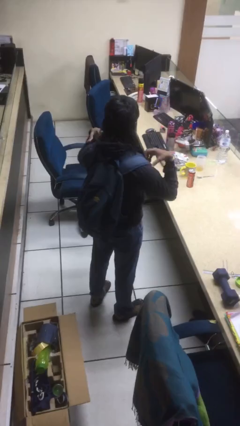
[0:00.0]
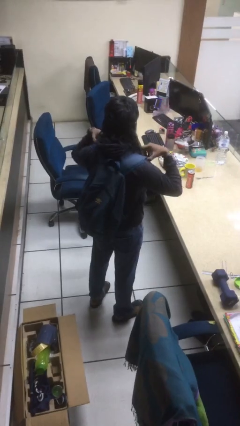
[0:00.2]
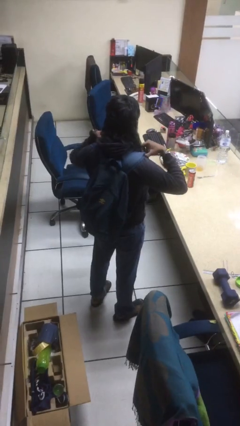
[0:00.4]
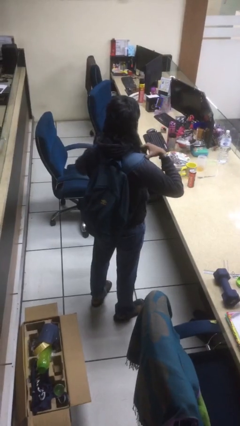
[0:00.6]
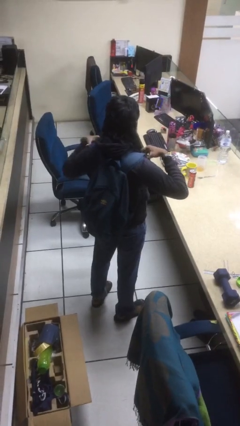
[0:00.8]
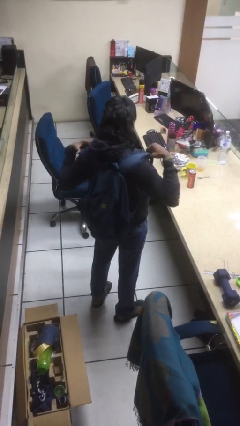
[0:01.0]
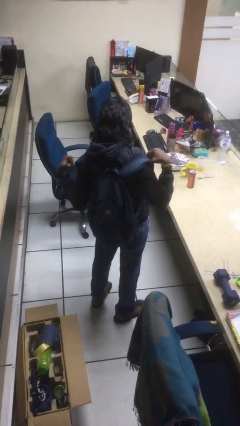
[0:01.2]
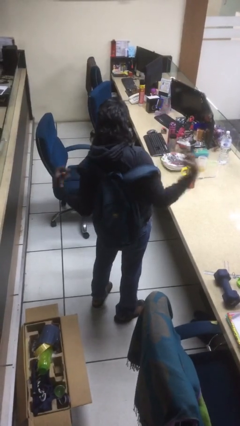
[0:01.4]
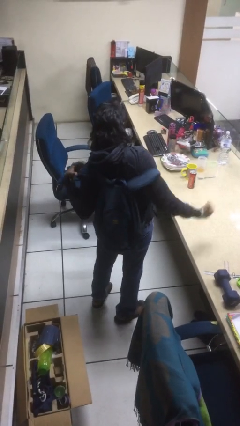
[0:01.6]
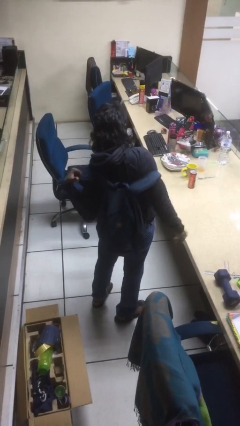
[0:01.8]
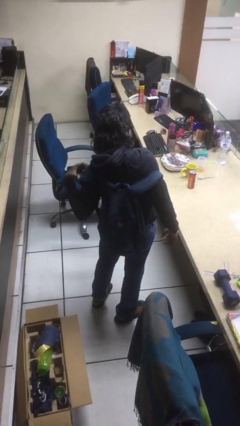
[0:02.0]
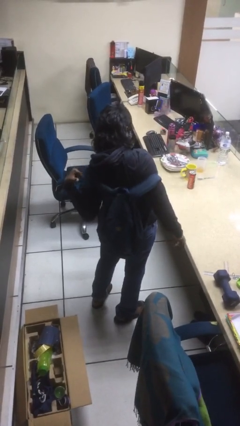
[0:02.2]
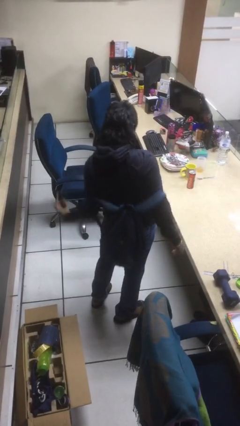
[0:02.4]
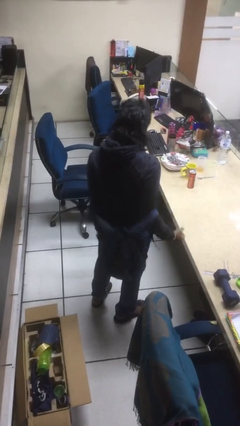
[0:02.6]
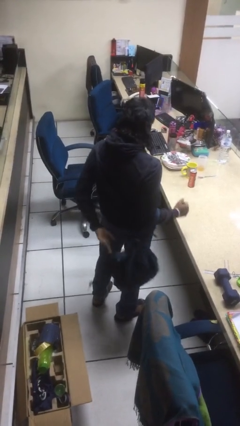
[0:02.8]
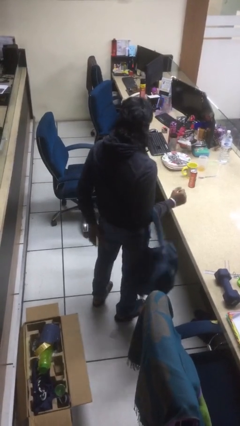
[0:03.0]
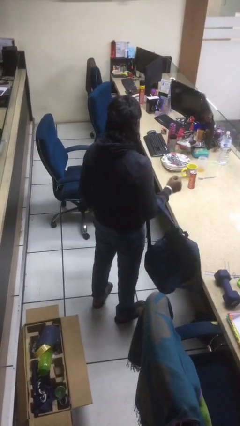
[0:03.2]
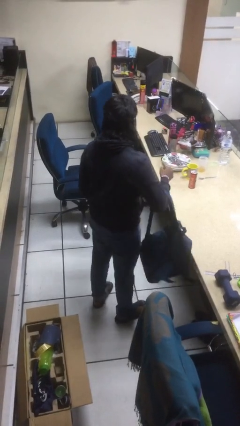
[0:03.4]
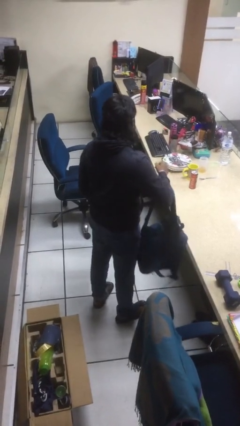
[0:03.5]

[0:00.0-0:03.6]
person takes off backpack

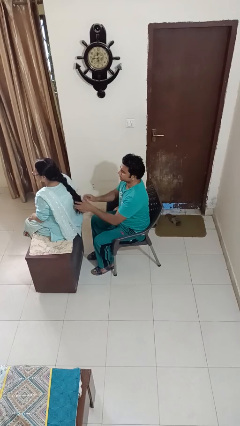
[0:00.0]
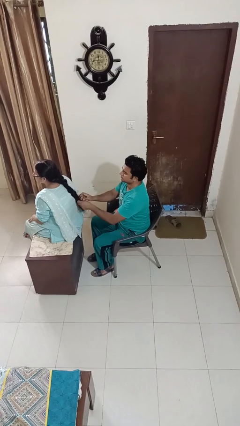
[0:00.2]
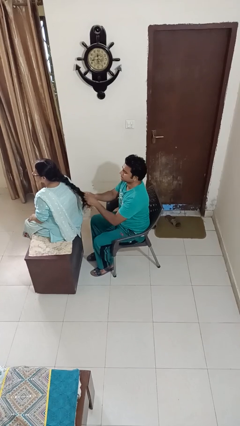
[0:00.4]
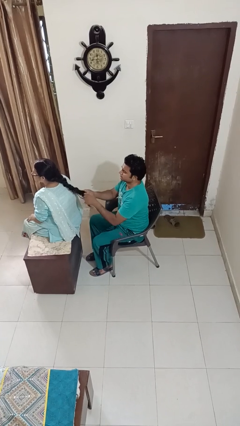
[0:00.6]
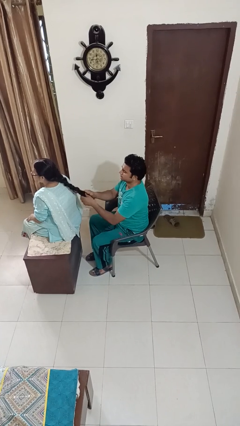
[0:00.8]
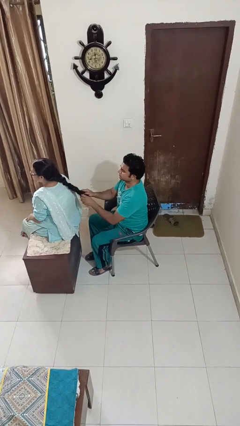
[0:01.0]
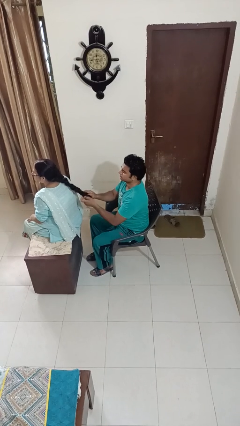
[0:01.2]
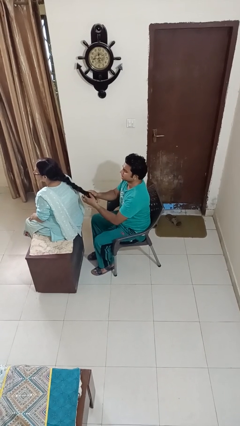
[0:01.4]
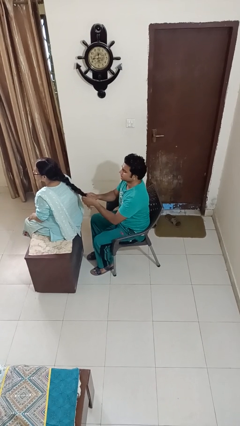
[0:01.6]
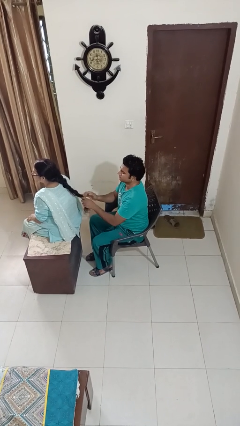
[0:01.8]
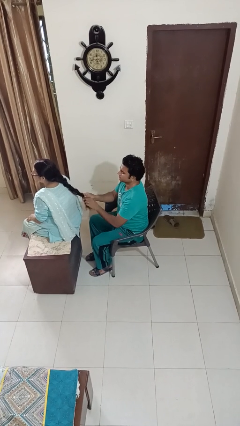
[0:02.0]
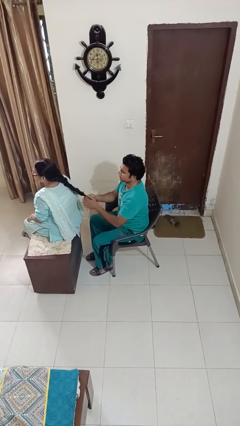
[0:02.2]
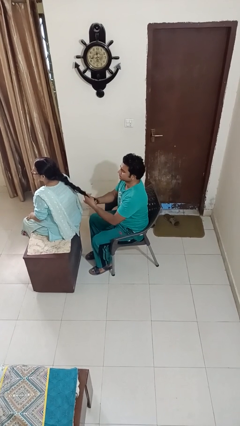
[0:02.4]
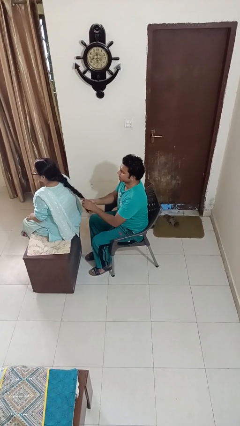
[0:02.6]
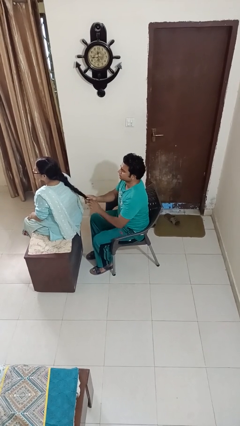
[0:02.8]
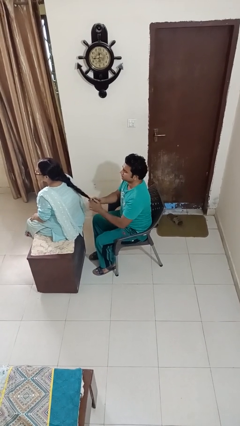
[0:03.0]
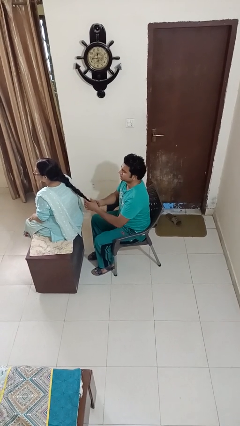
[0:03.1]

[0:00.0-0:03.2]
person braids hair of person

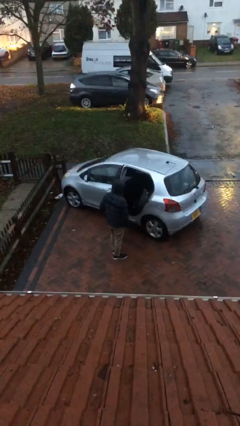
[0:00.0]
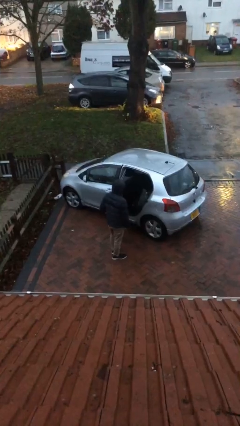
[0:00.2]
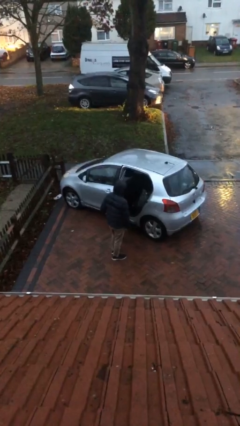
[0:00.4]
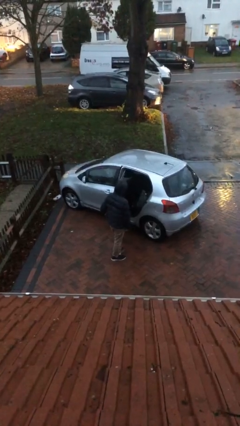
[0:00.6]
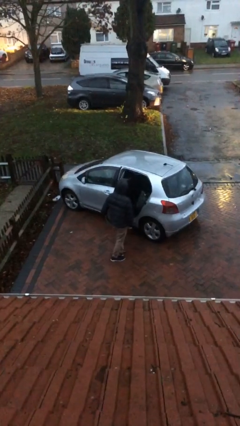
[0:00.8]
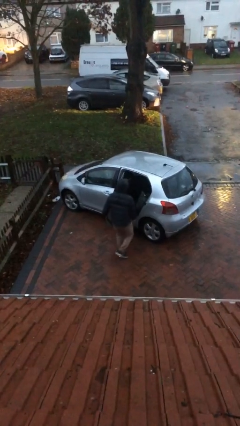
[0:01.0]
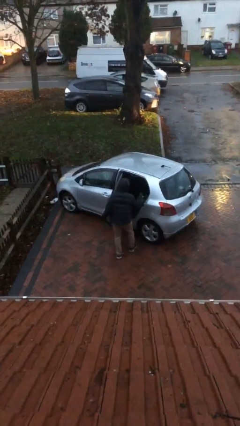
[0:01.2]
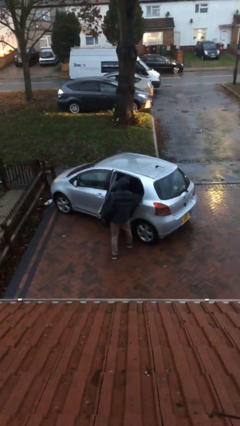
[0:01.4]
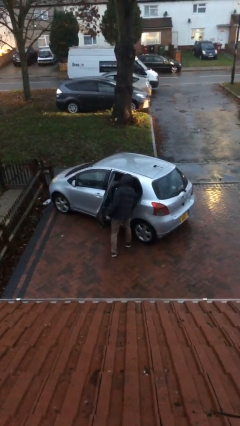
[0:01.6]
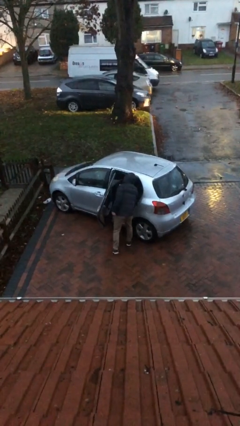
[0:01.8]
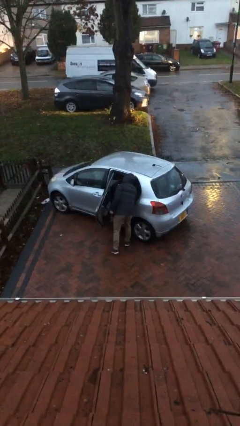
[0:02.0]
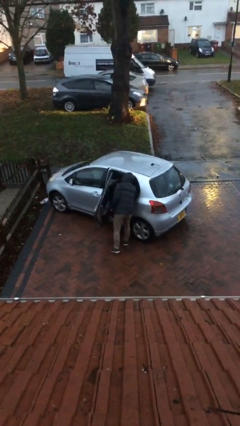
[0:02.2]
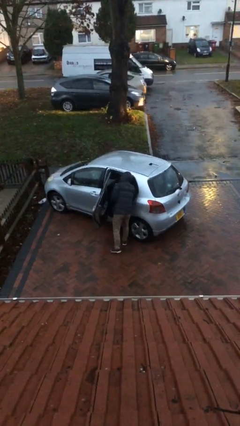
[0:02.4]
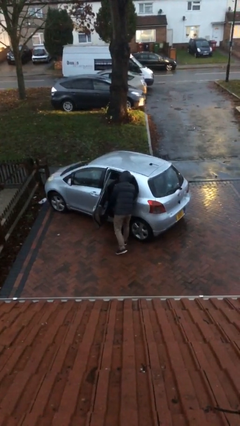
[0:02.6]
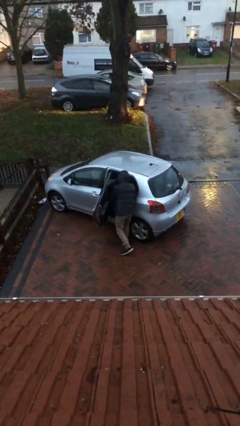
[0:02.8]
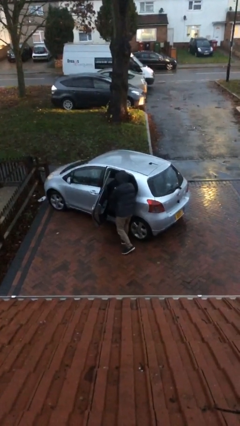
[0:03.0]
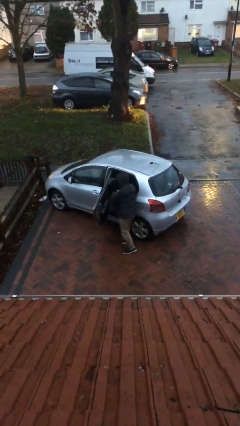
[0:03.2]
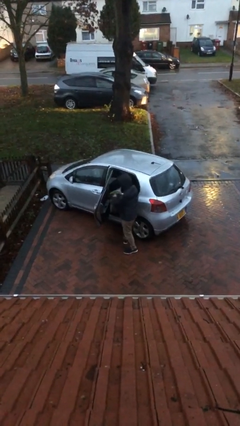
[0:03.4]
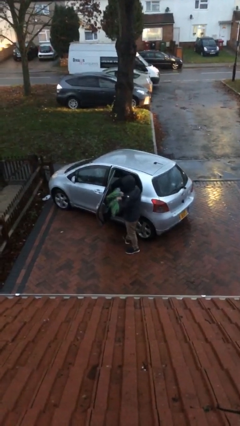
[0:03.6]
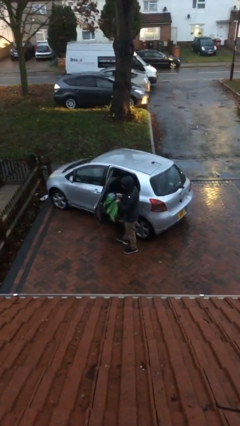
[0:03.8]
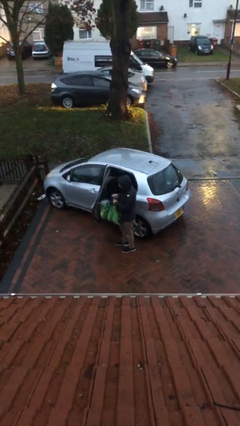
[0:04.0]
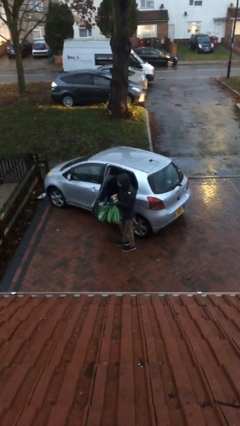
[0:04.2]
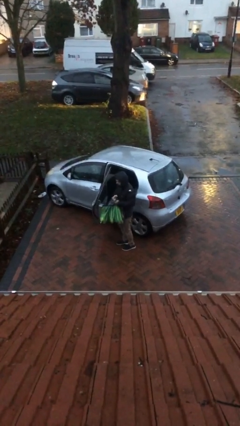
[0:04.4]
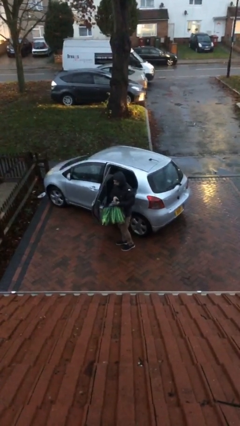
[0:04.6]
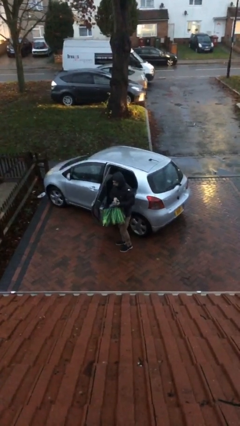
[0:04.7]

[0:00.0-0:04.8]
person unloads car

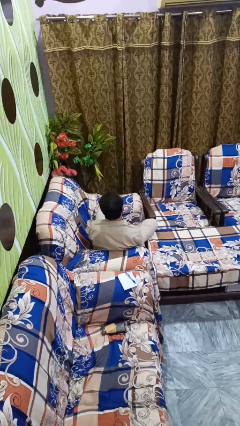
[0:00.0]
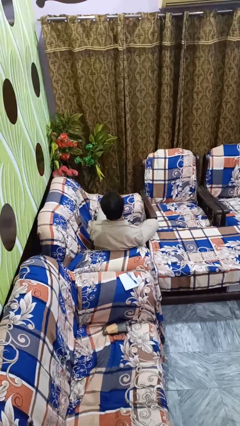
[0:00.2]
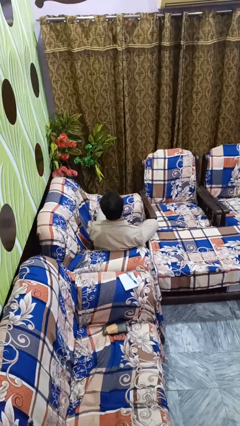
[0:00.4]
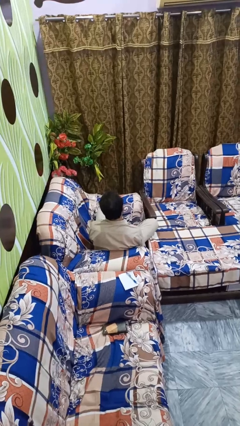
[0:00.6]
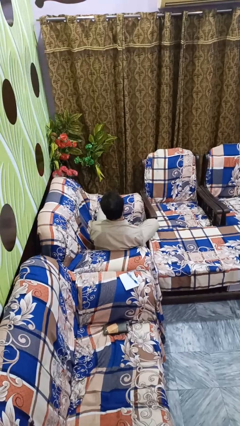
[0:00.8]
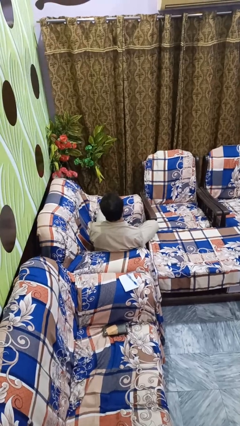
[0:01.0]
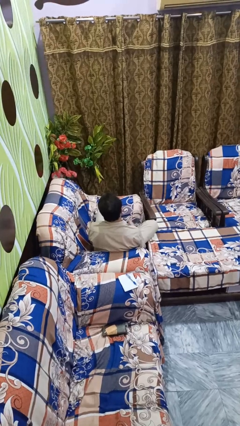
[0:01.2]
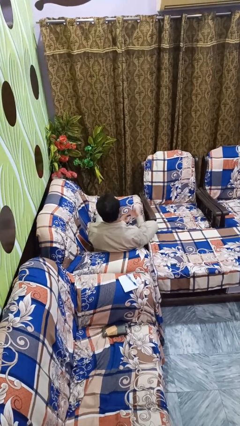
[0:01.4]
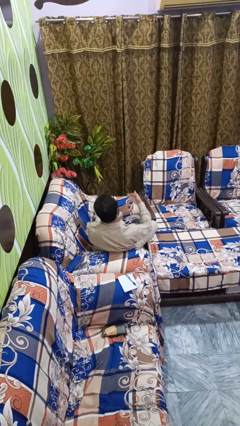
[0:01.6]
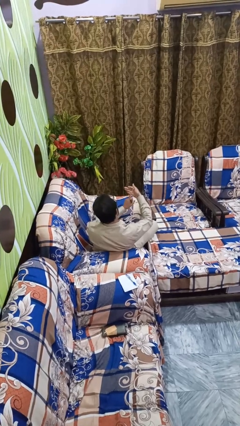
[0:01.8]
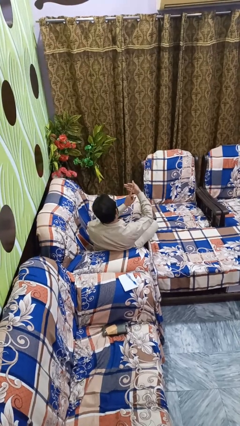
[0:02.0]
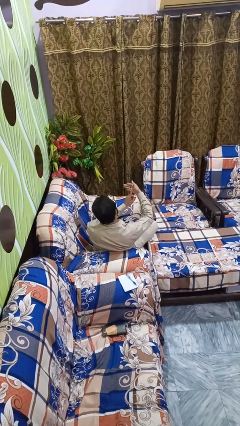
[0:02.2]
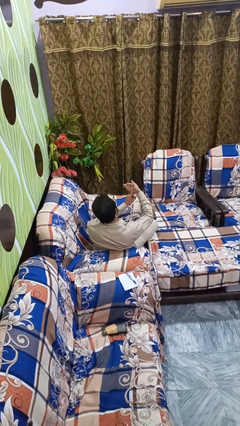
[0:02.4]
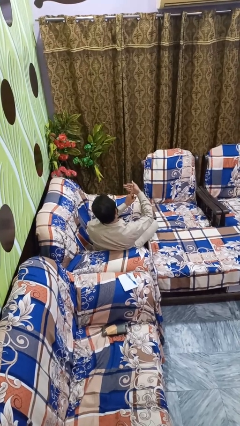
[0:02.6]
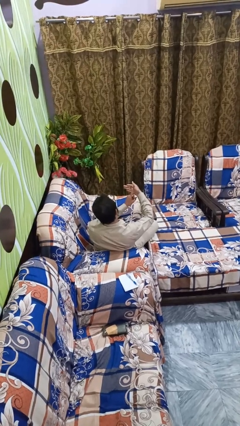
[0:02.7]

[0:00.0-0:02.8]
person gestures number one

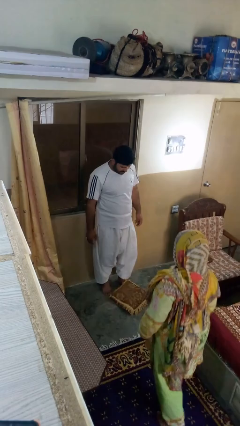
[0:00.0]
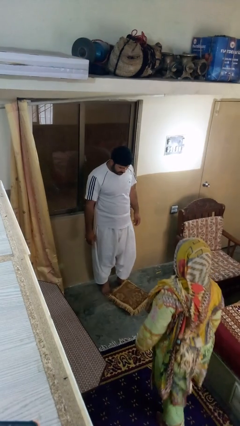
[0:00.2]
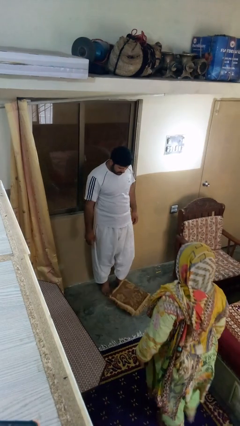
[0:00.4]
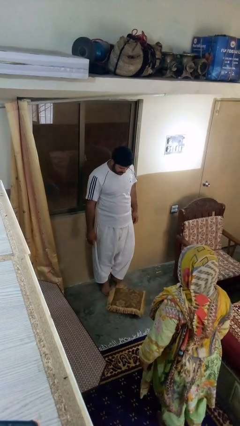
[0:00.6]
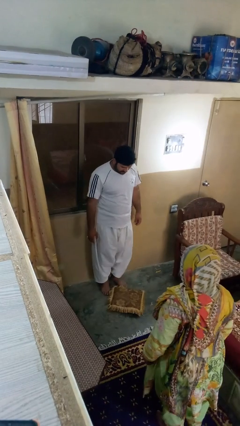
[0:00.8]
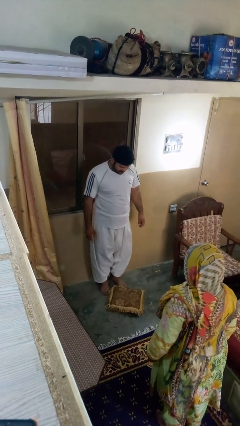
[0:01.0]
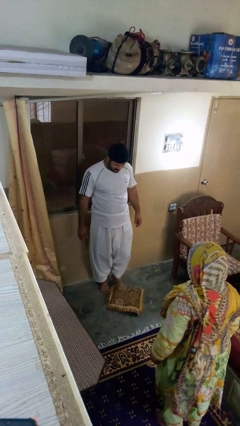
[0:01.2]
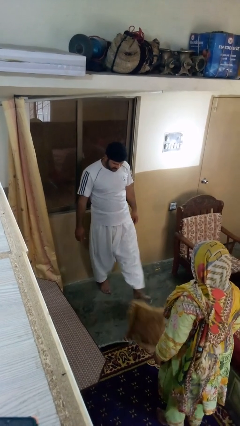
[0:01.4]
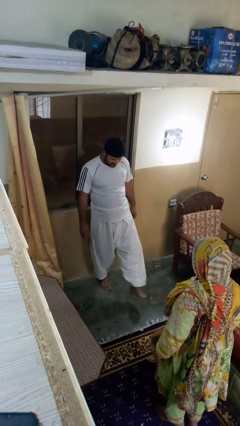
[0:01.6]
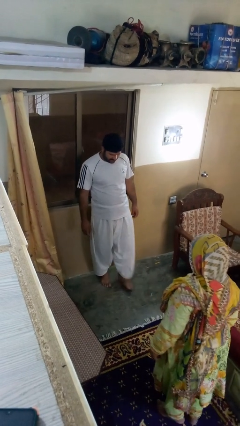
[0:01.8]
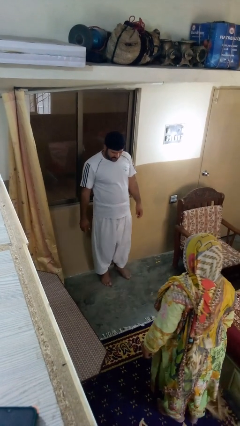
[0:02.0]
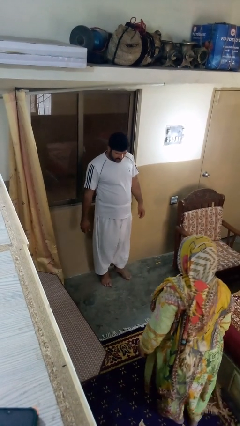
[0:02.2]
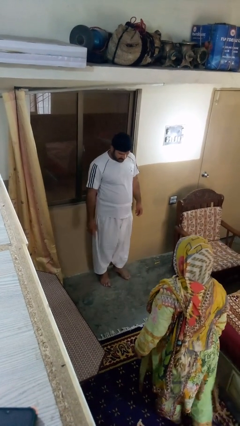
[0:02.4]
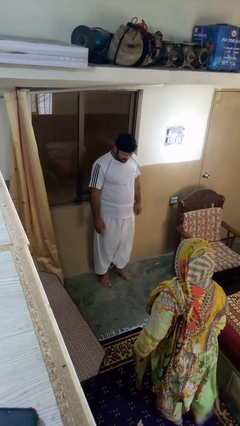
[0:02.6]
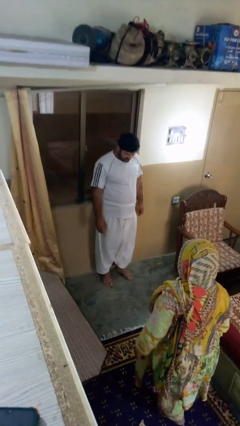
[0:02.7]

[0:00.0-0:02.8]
person kicks object to person

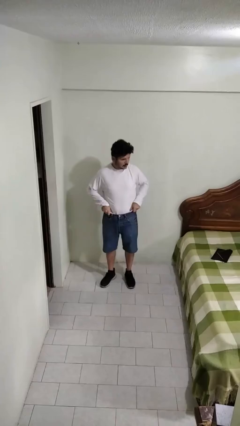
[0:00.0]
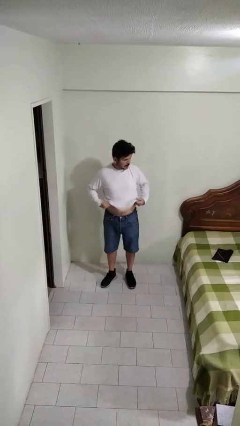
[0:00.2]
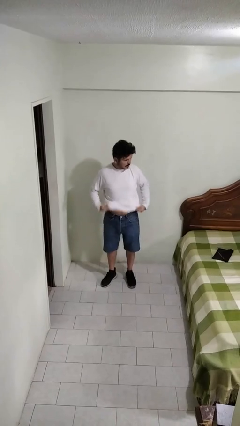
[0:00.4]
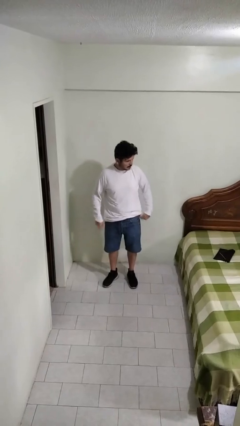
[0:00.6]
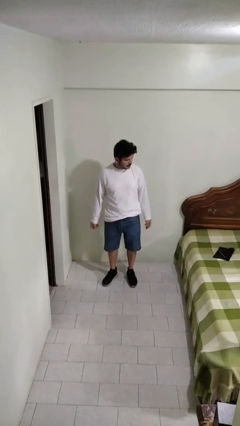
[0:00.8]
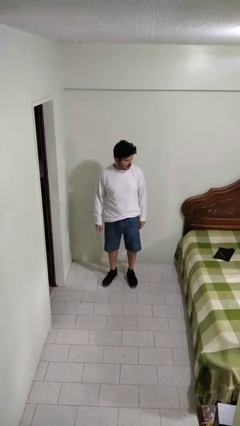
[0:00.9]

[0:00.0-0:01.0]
person untucks shirt
